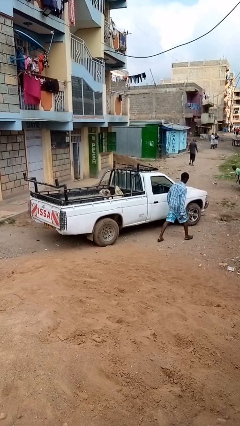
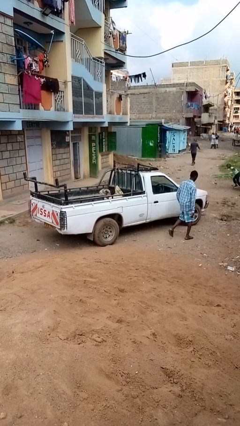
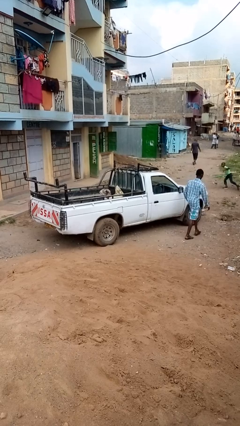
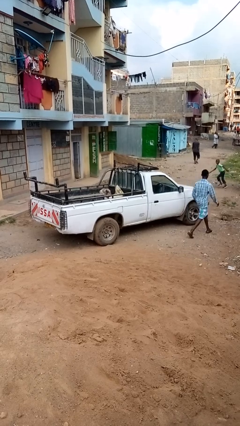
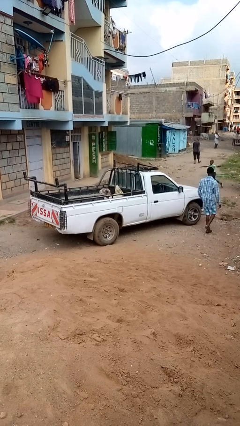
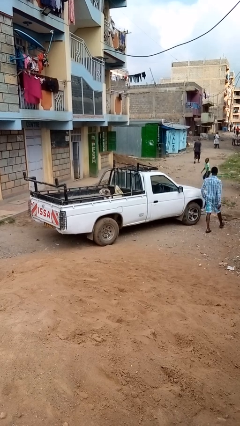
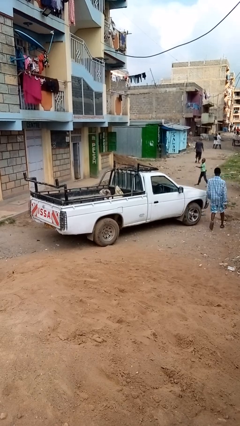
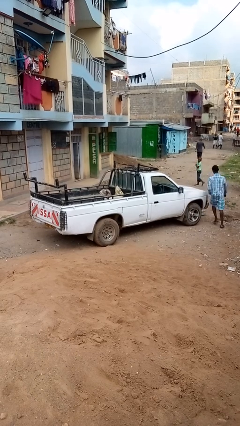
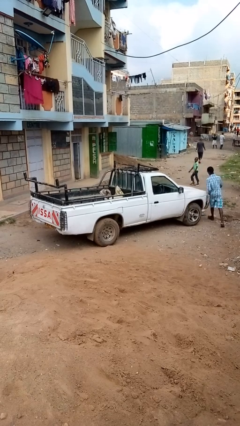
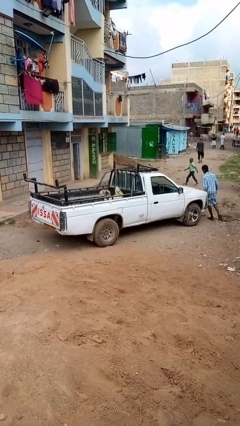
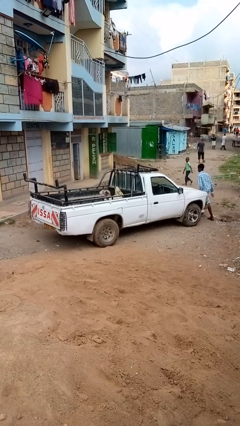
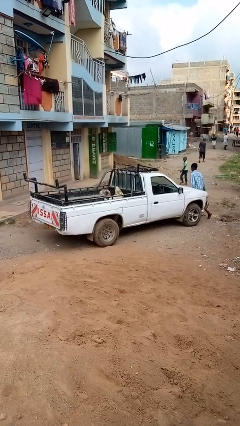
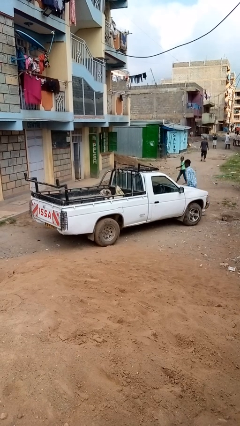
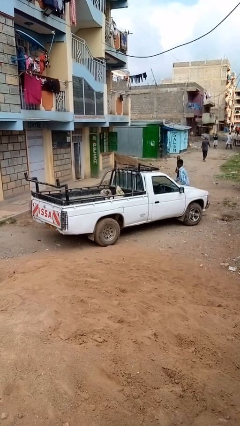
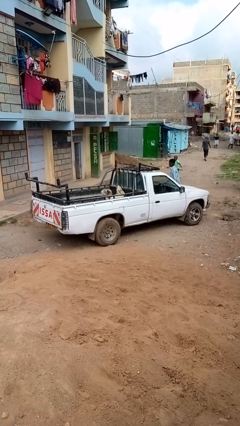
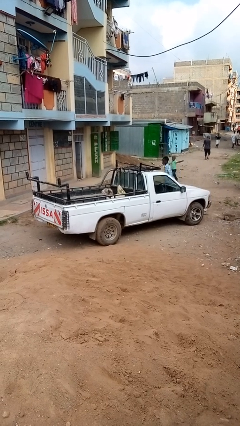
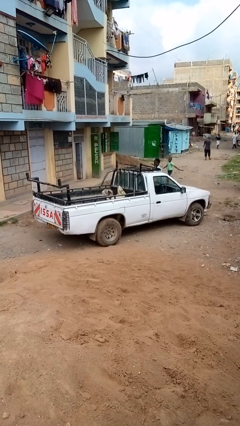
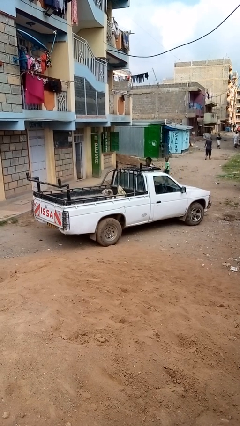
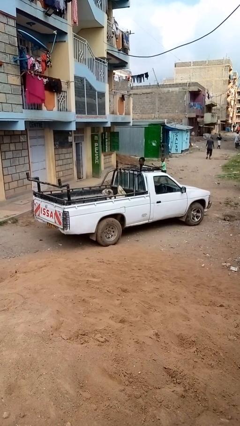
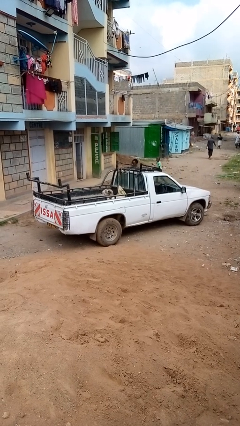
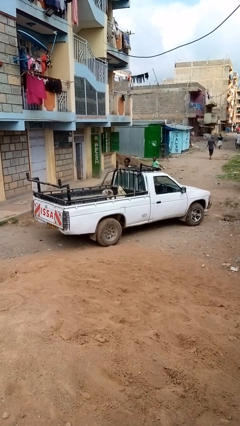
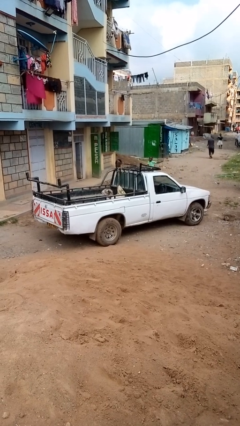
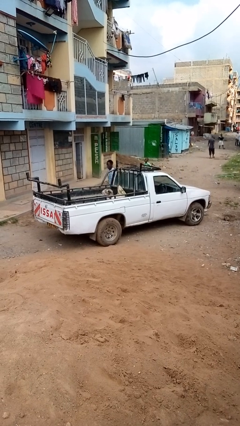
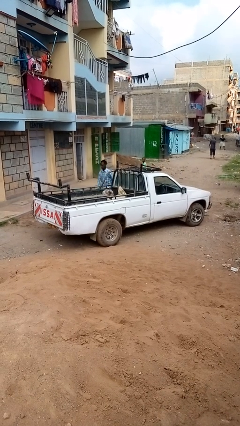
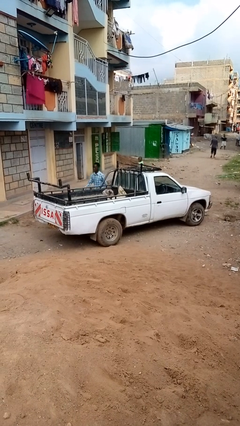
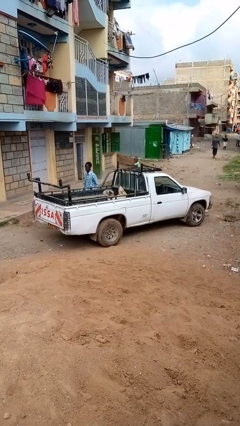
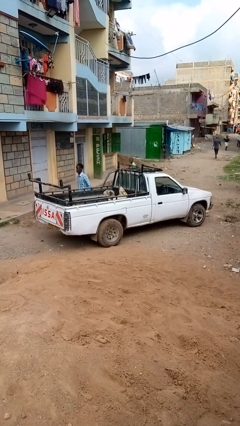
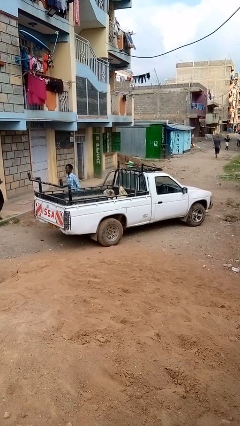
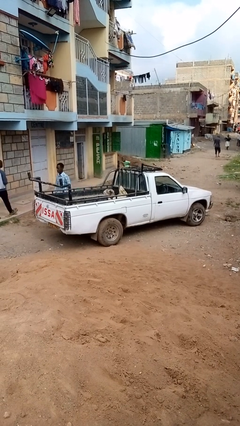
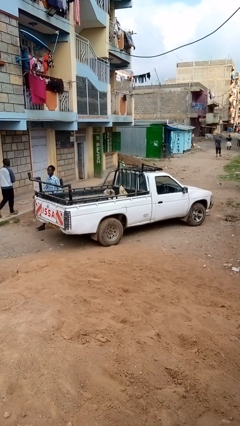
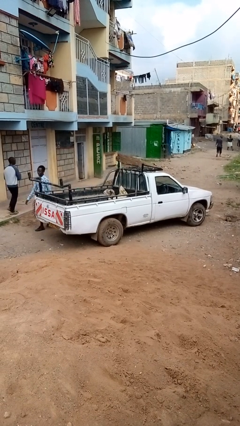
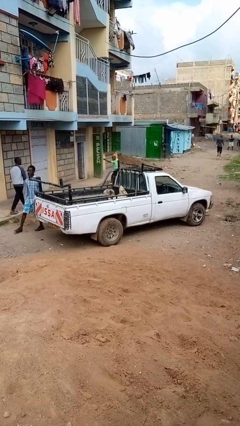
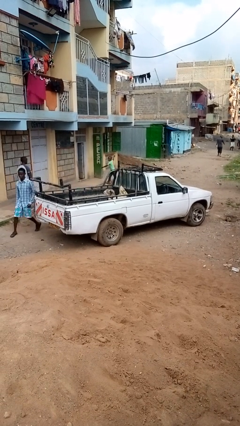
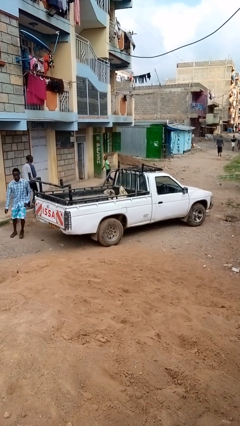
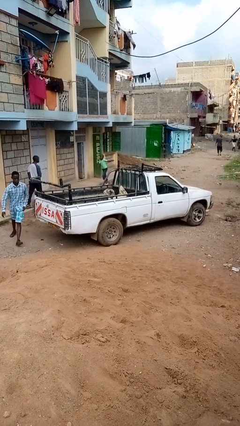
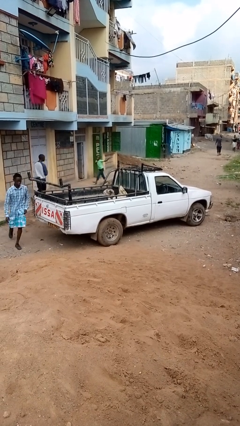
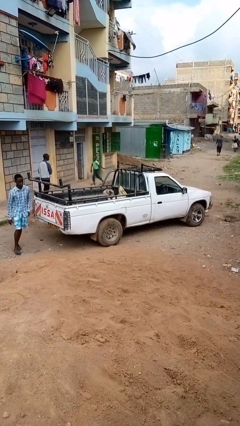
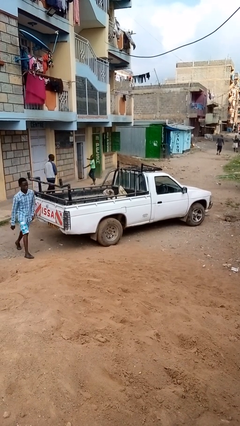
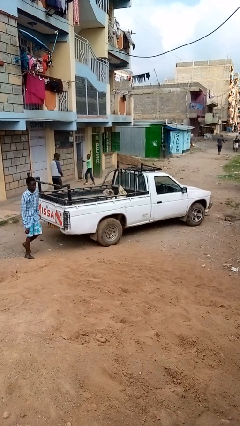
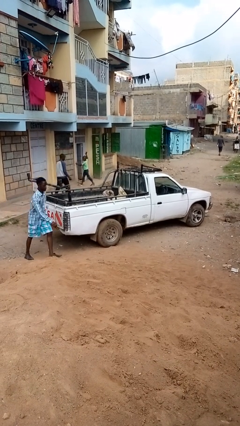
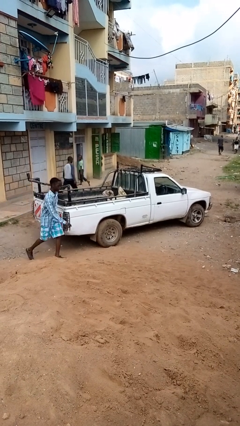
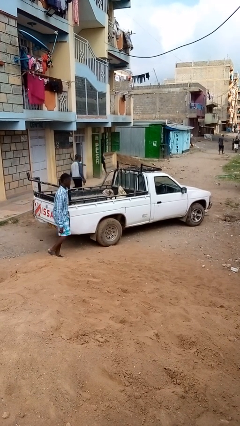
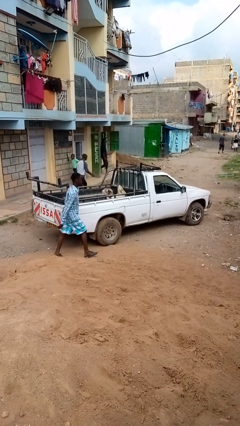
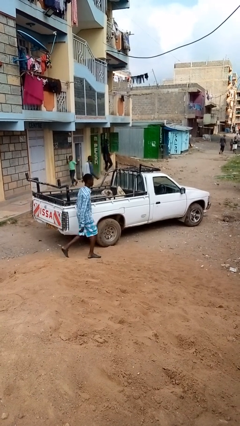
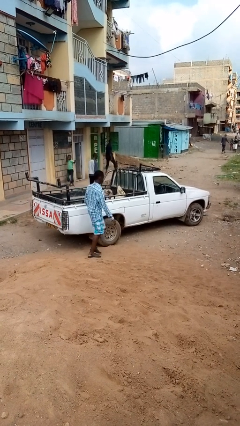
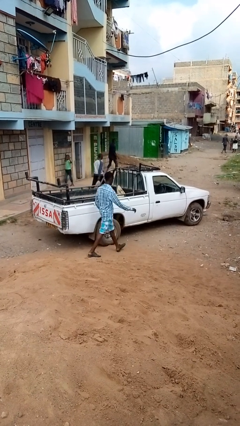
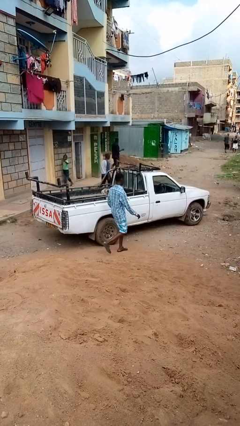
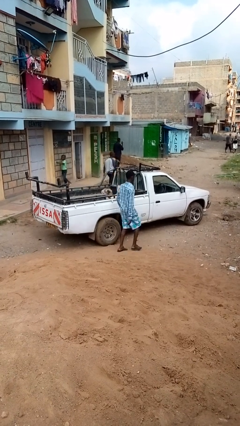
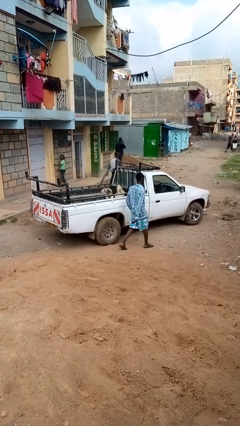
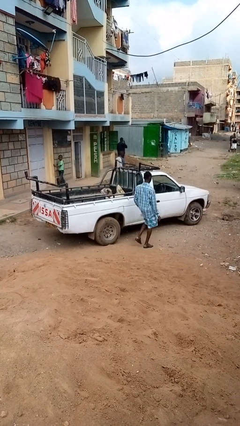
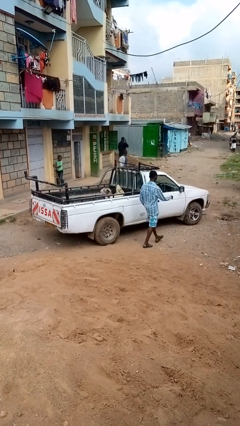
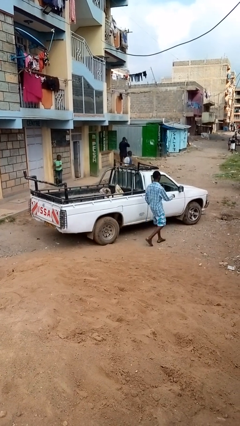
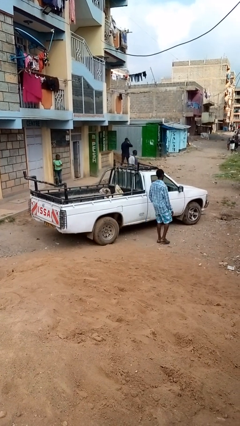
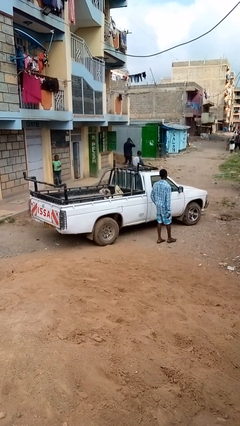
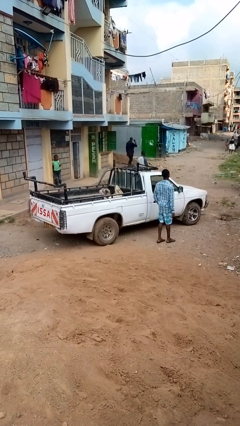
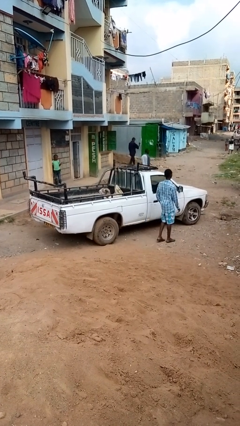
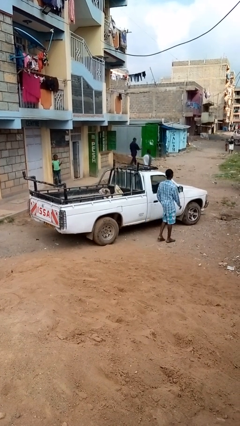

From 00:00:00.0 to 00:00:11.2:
person walks around car

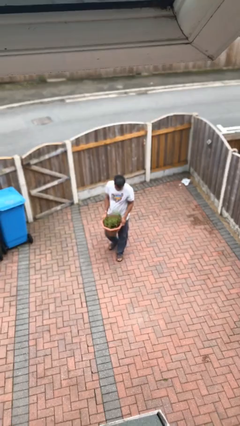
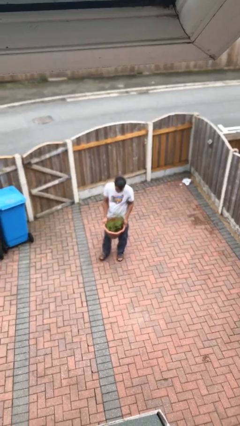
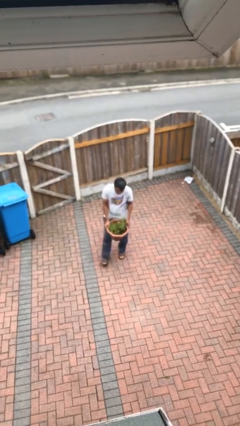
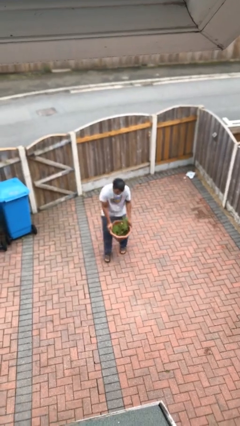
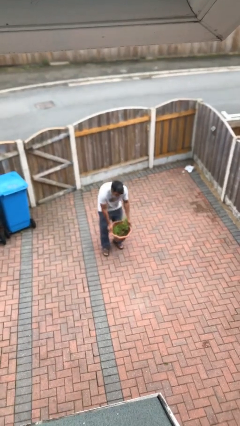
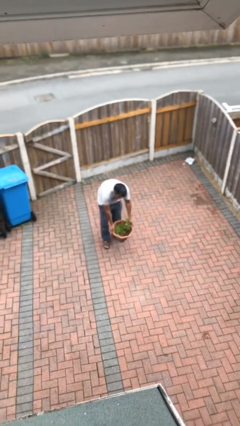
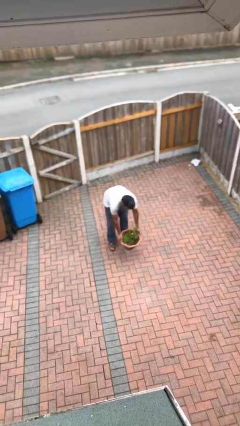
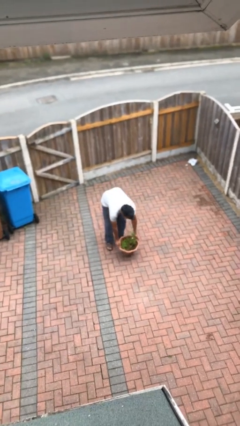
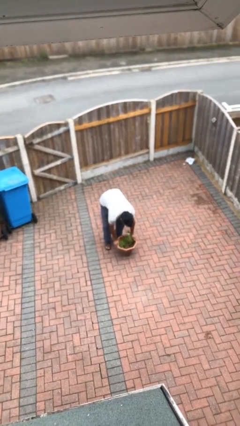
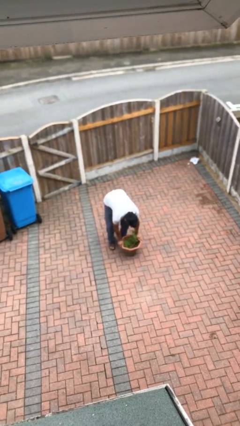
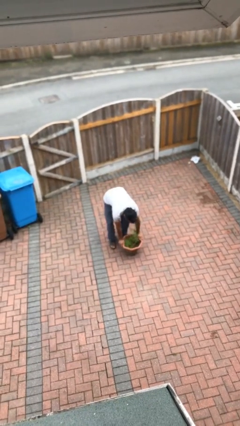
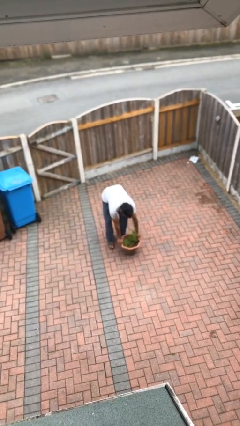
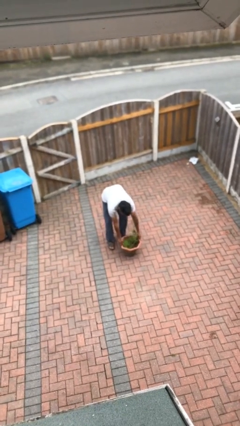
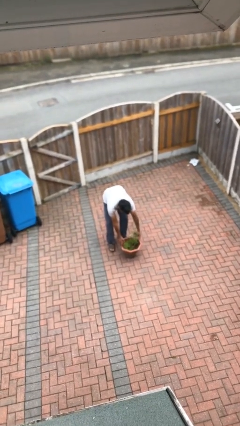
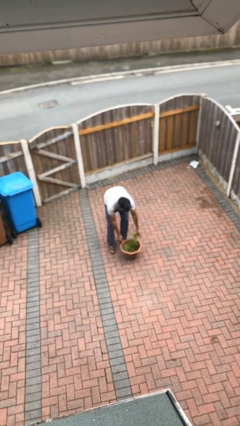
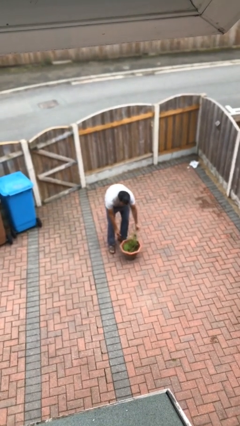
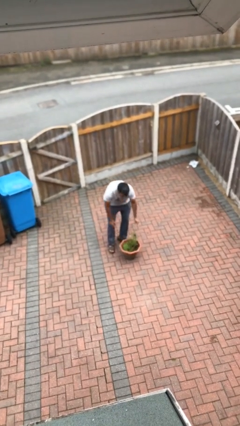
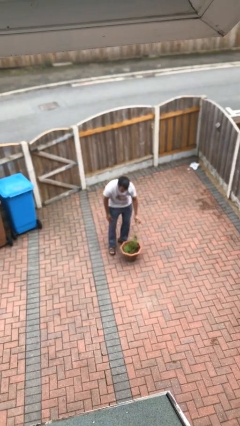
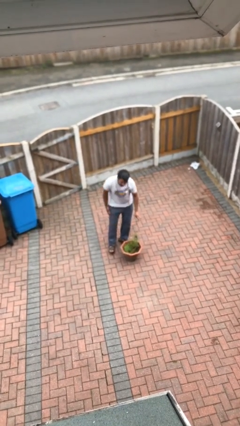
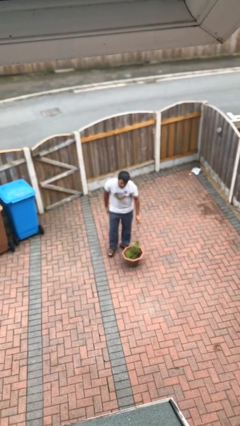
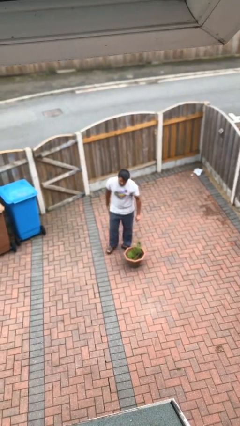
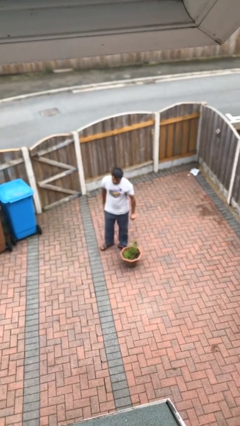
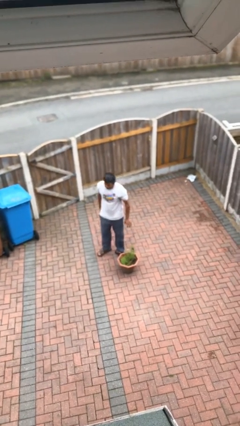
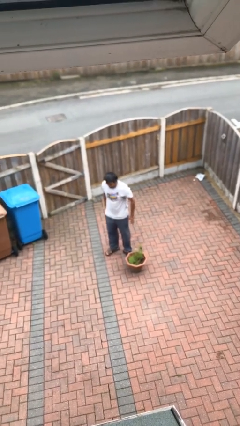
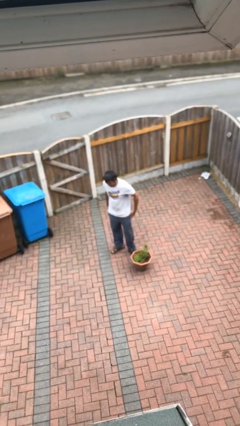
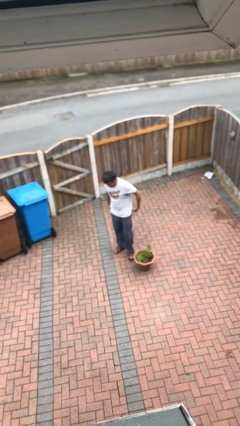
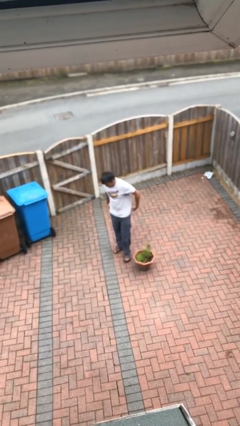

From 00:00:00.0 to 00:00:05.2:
person puts down object on floor

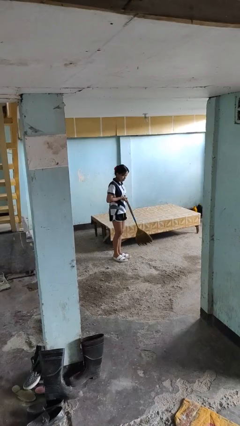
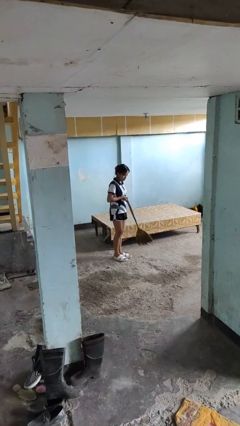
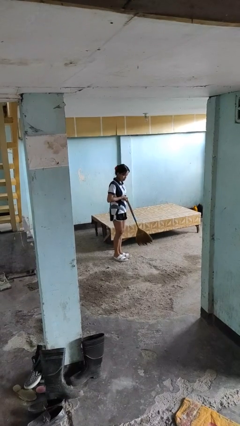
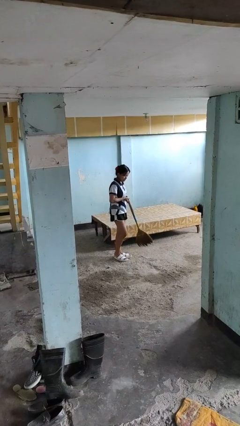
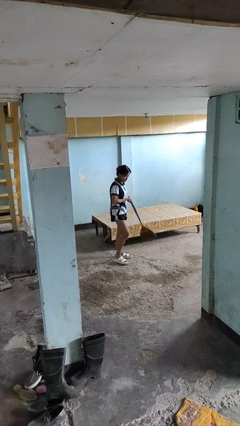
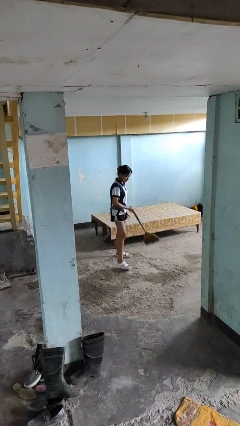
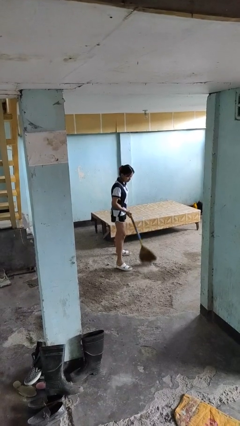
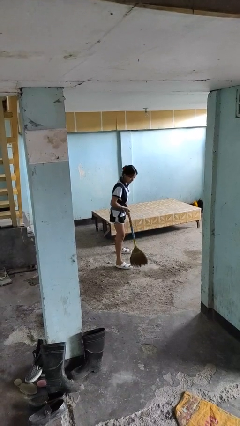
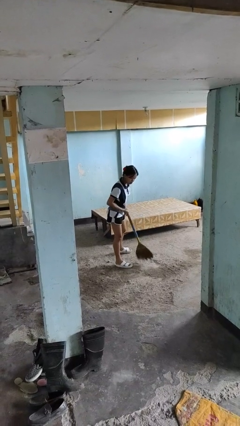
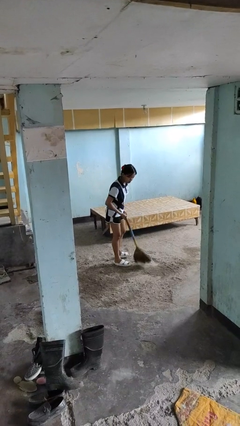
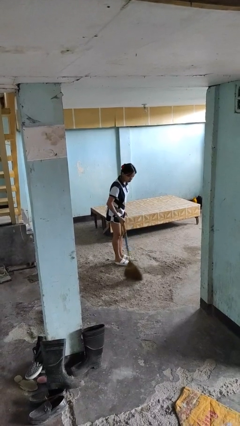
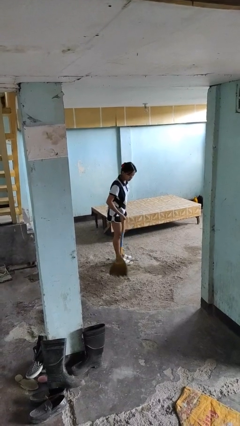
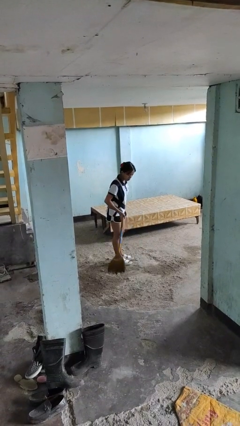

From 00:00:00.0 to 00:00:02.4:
person sweeps floor
